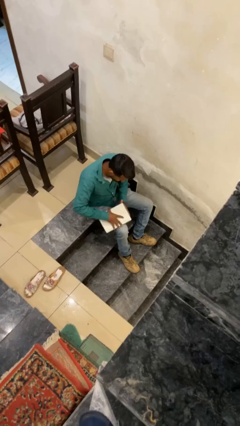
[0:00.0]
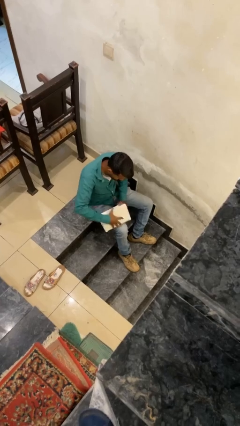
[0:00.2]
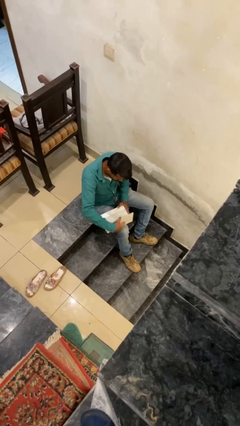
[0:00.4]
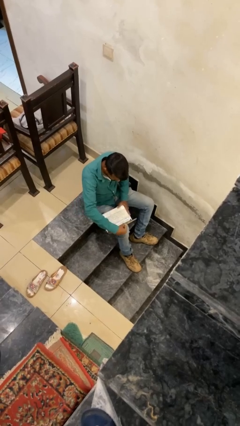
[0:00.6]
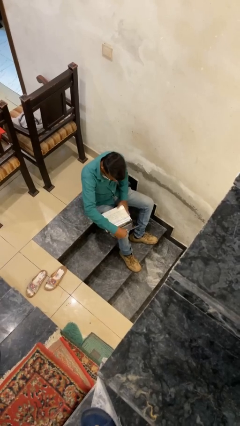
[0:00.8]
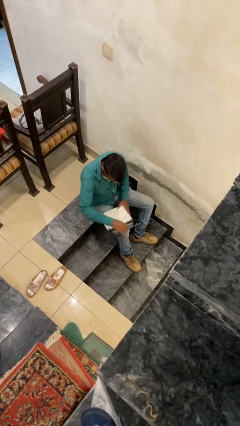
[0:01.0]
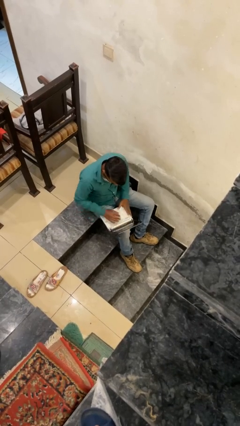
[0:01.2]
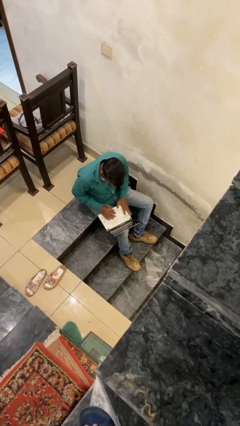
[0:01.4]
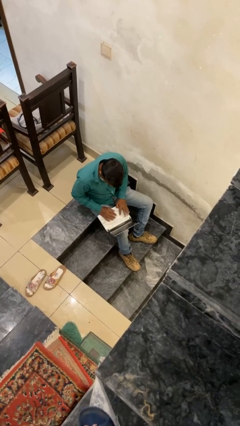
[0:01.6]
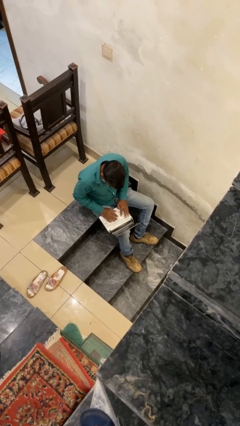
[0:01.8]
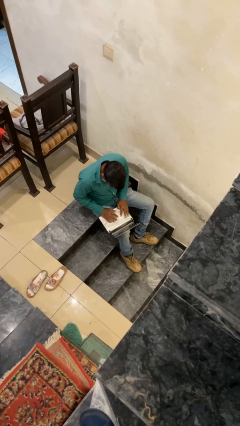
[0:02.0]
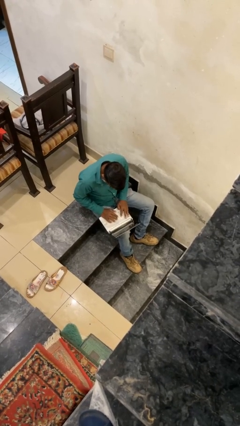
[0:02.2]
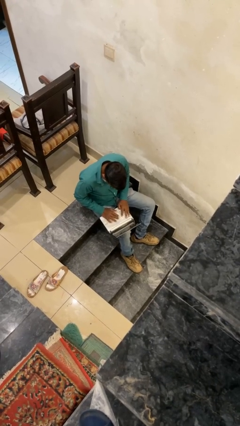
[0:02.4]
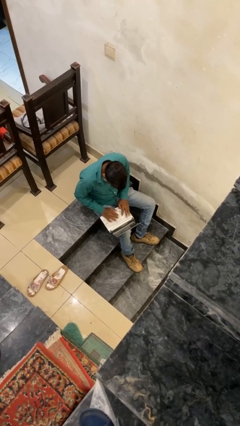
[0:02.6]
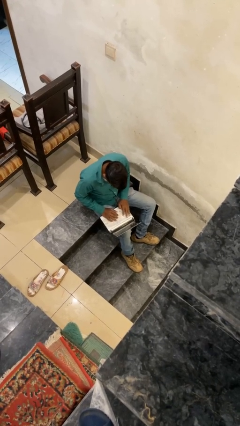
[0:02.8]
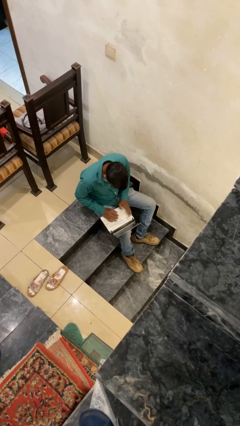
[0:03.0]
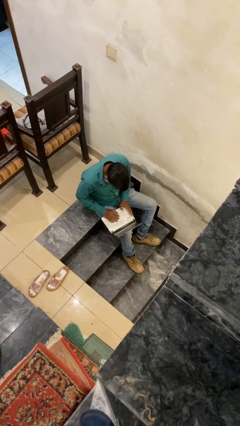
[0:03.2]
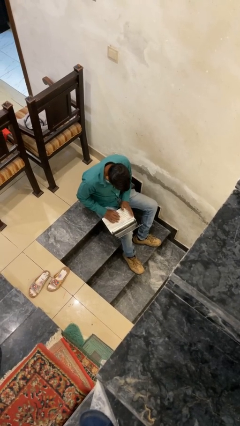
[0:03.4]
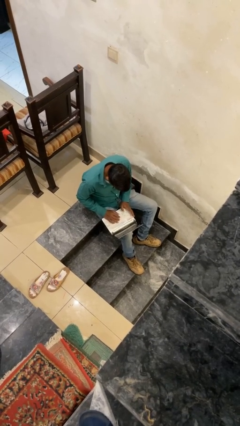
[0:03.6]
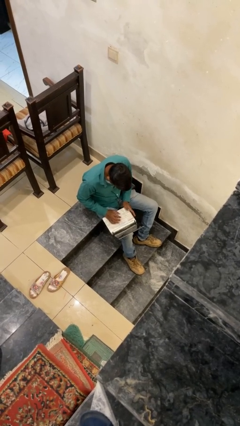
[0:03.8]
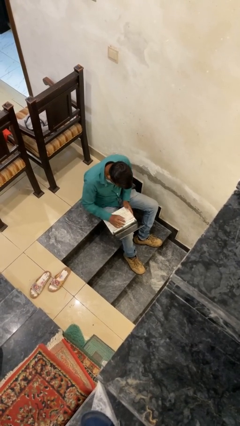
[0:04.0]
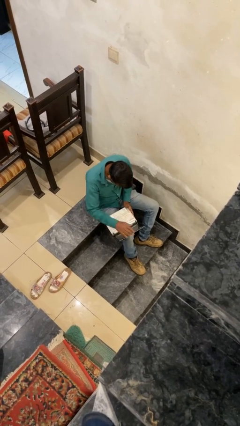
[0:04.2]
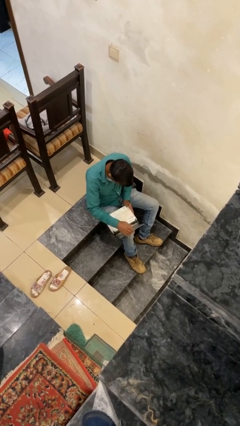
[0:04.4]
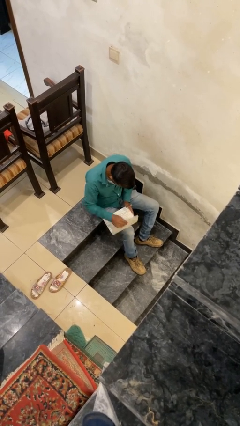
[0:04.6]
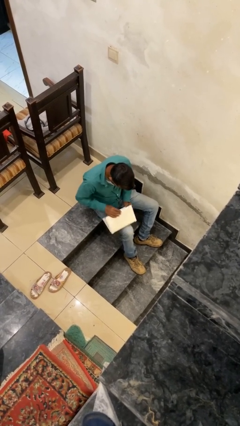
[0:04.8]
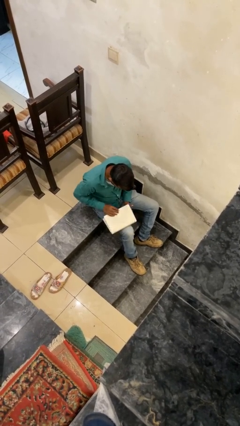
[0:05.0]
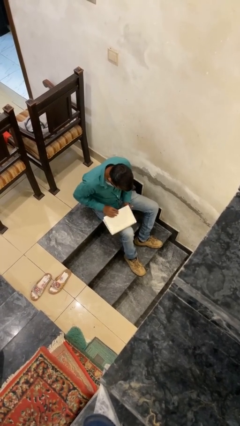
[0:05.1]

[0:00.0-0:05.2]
person interacts with laptop

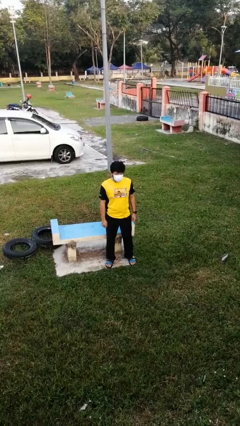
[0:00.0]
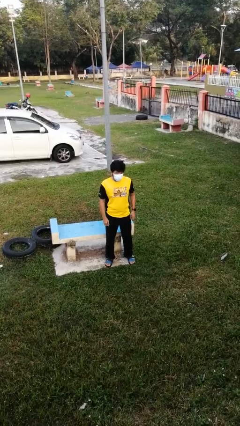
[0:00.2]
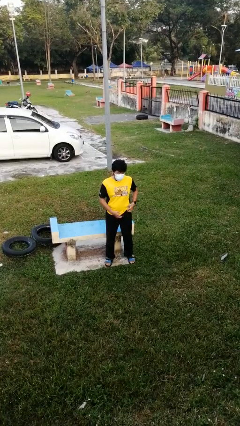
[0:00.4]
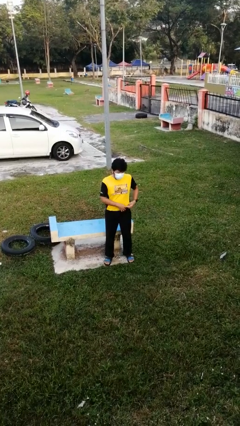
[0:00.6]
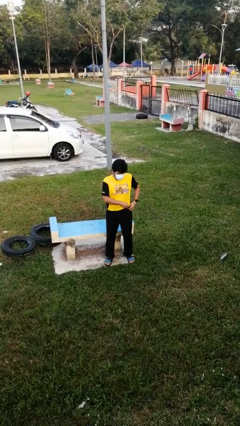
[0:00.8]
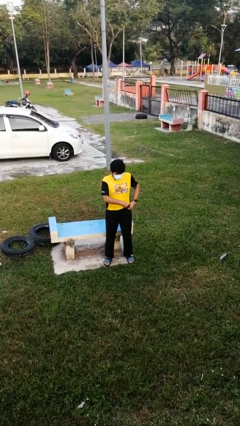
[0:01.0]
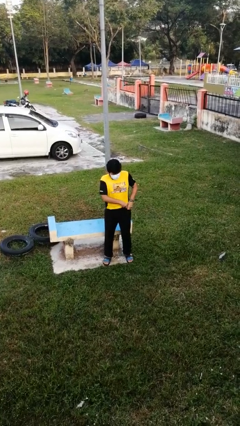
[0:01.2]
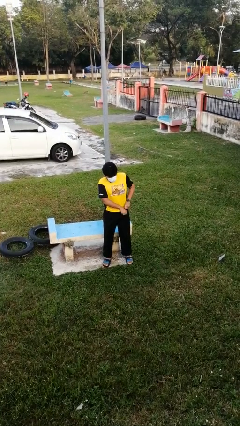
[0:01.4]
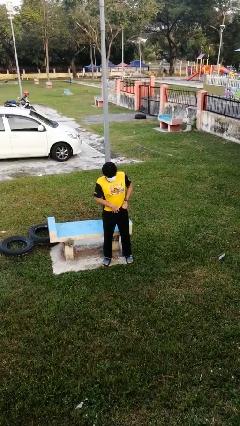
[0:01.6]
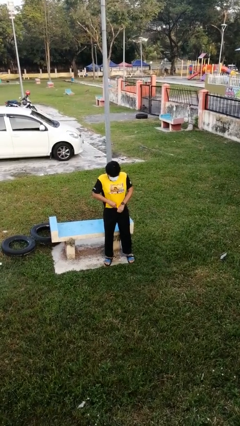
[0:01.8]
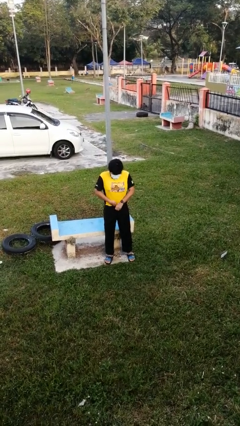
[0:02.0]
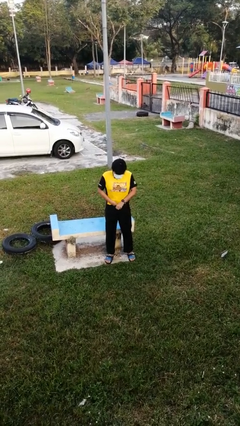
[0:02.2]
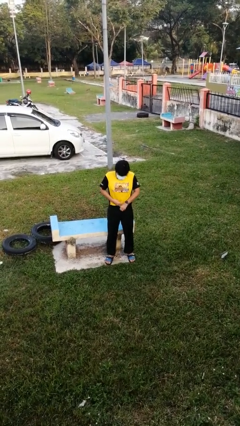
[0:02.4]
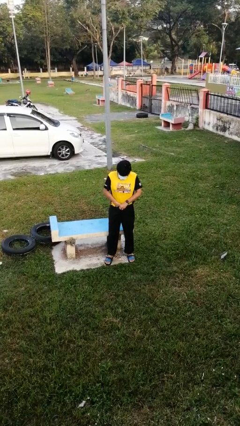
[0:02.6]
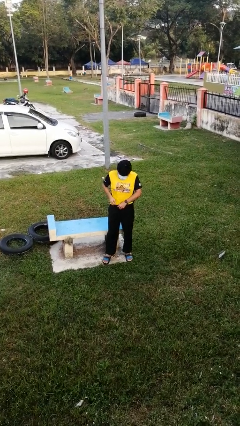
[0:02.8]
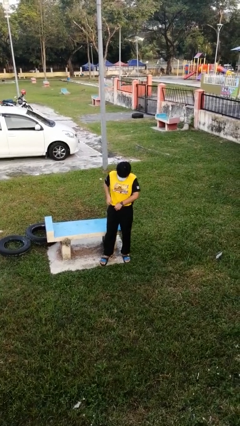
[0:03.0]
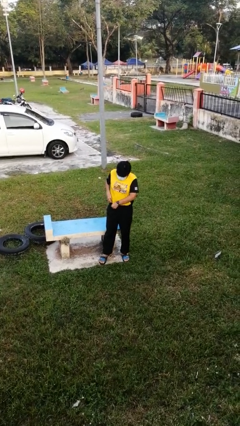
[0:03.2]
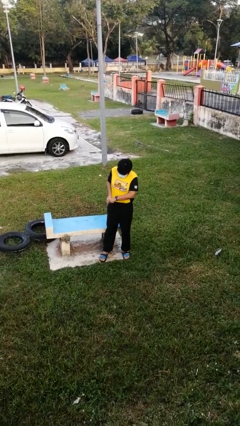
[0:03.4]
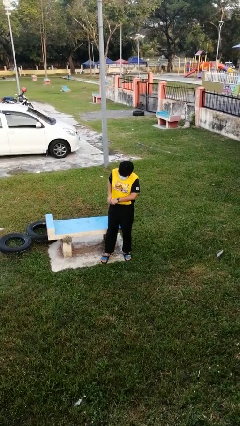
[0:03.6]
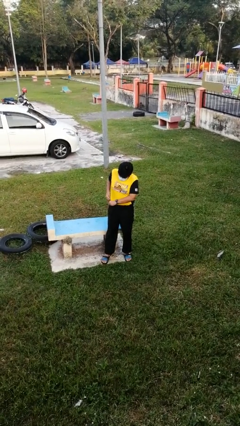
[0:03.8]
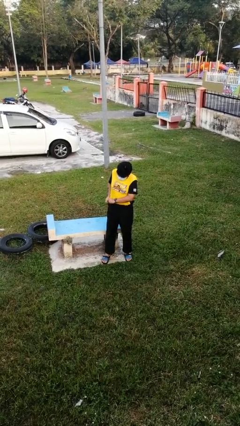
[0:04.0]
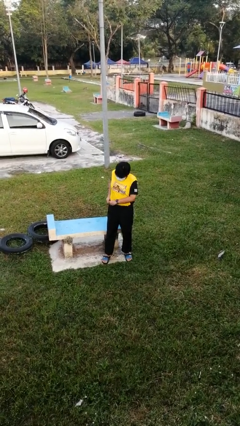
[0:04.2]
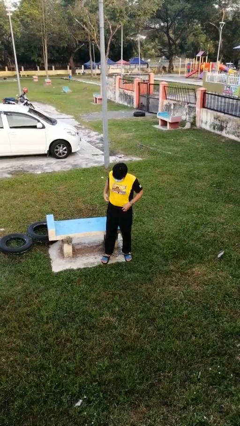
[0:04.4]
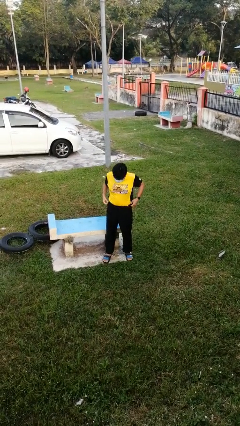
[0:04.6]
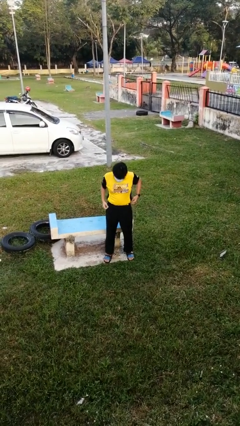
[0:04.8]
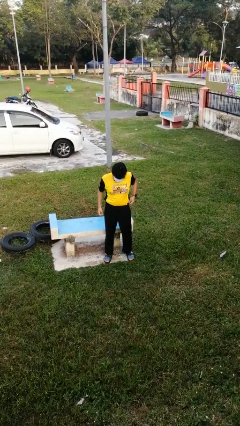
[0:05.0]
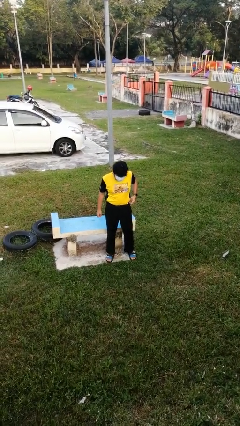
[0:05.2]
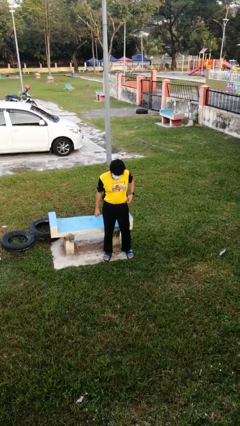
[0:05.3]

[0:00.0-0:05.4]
person tucks in shirt

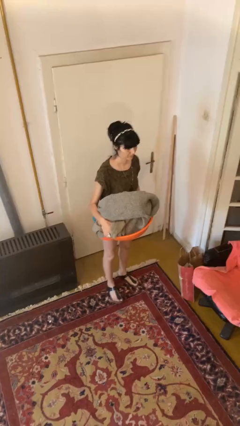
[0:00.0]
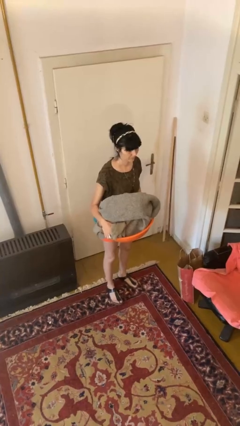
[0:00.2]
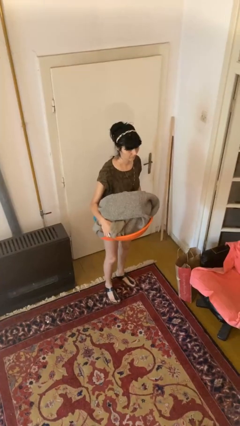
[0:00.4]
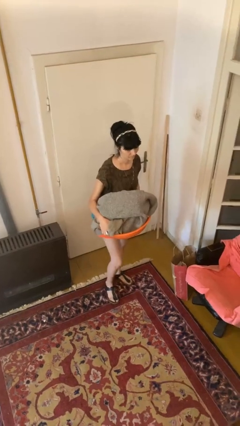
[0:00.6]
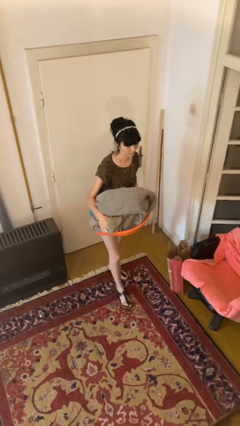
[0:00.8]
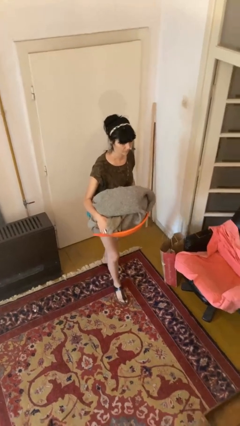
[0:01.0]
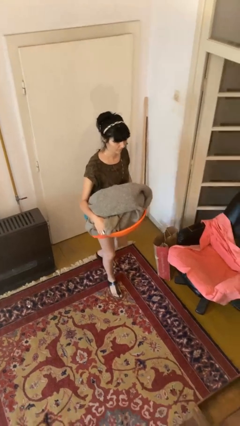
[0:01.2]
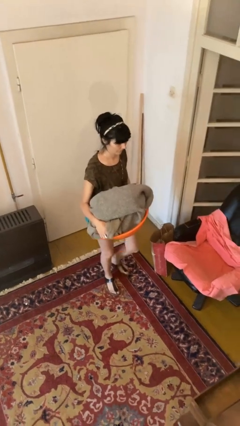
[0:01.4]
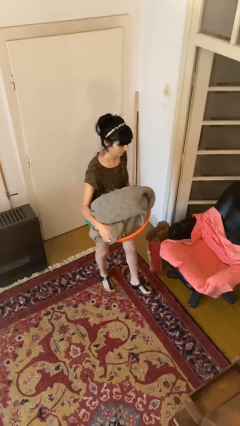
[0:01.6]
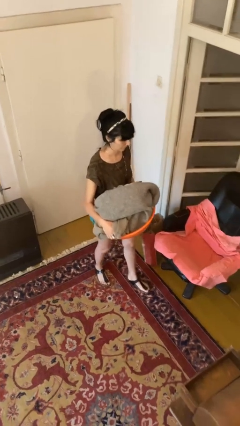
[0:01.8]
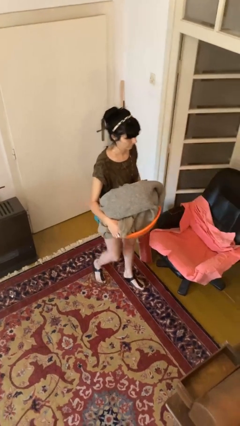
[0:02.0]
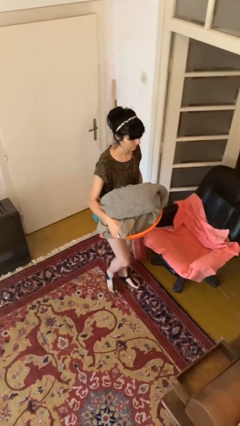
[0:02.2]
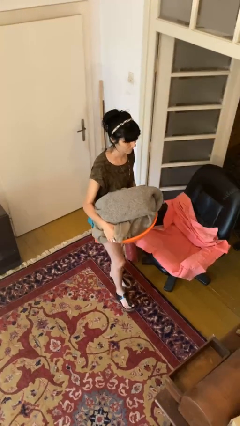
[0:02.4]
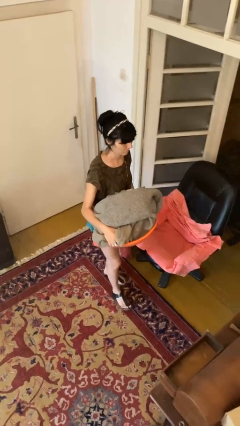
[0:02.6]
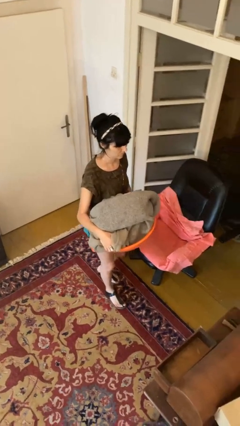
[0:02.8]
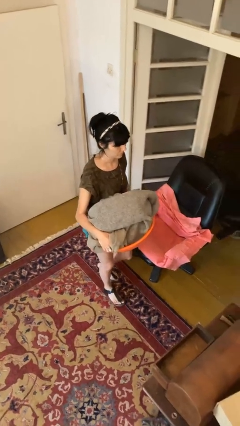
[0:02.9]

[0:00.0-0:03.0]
person carries laundry basket

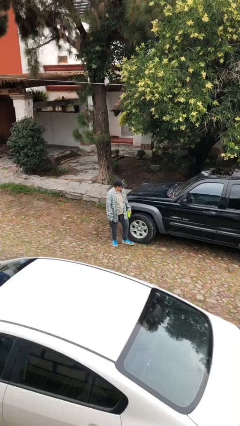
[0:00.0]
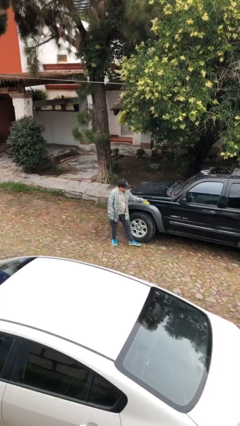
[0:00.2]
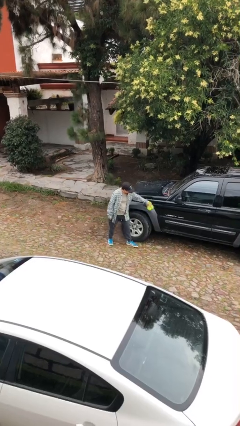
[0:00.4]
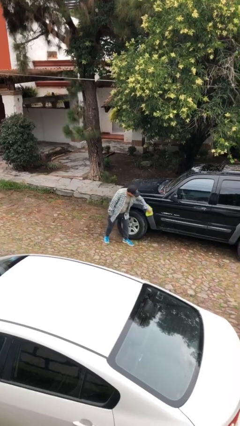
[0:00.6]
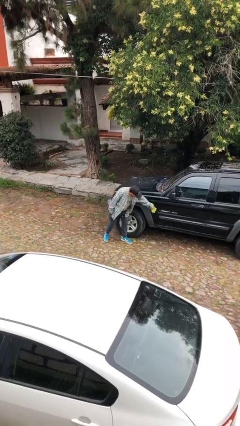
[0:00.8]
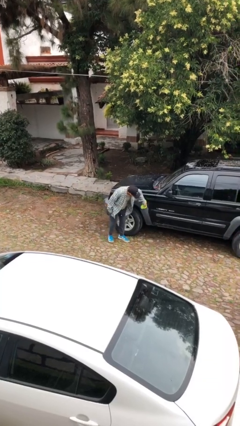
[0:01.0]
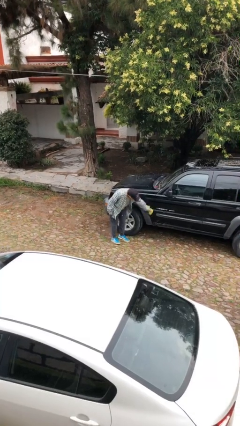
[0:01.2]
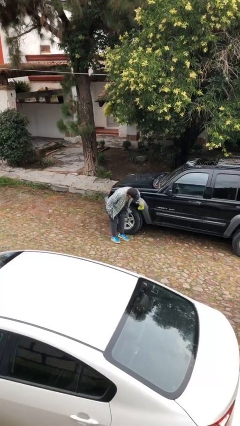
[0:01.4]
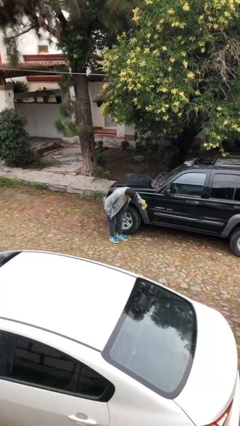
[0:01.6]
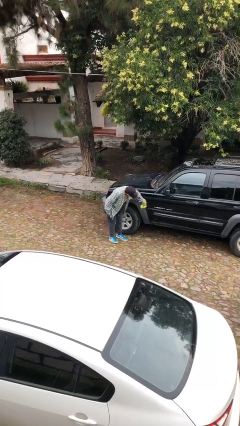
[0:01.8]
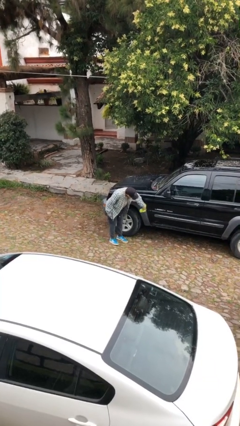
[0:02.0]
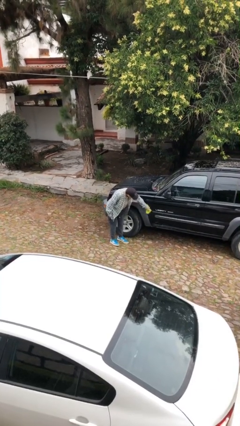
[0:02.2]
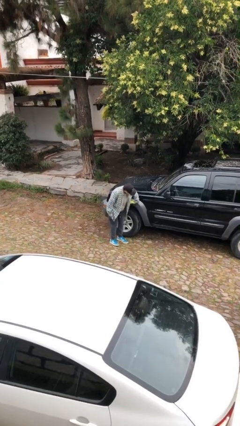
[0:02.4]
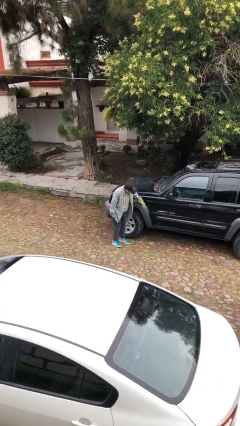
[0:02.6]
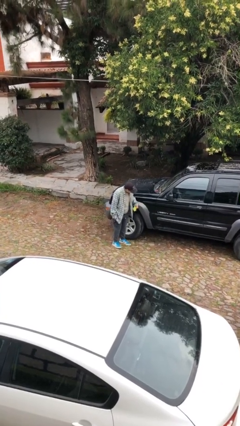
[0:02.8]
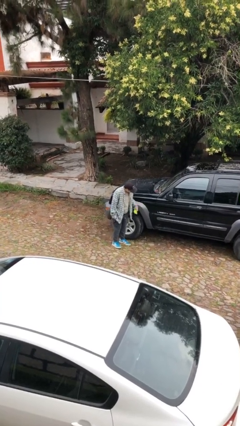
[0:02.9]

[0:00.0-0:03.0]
person polishes car with rag

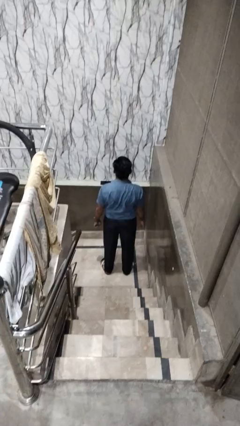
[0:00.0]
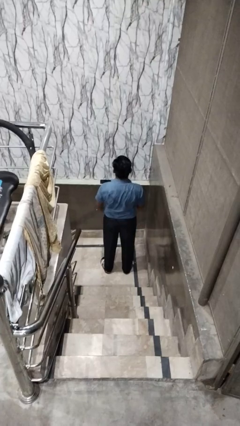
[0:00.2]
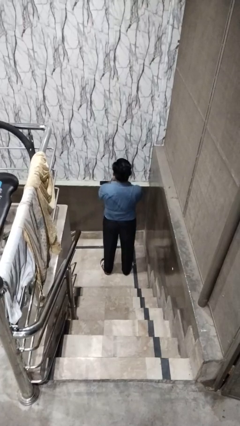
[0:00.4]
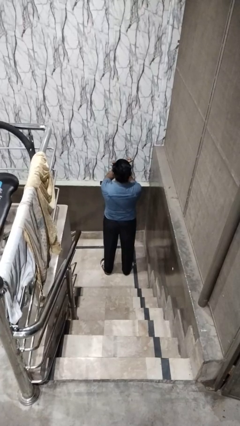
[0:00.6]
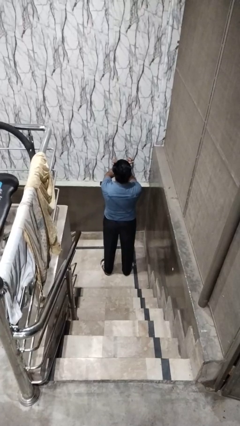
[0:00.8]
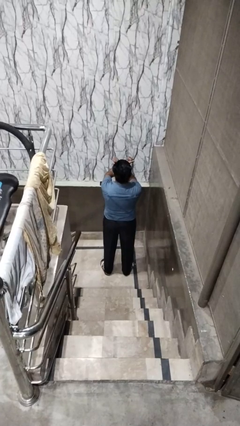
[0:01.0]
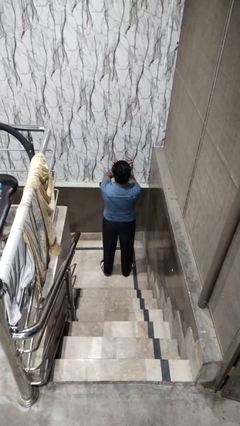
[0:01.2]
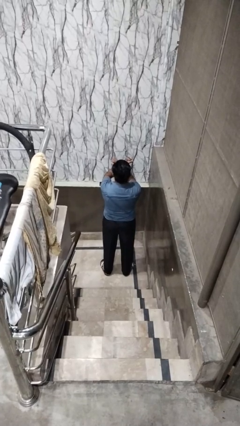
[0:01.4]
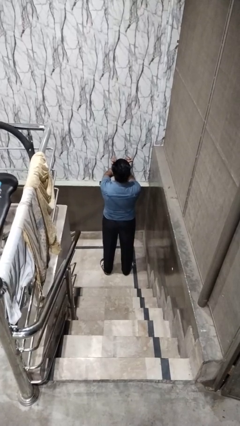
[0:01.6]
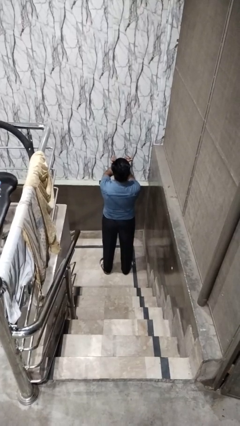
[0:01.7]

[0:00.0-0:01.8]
person gestures arms x
